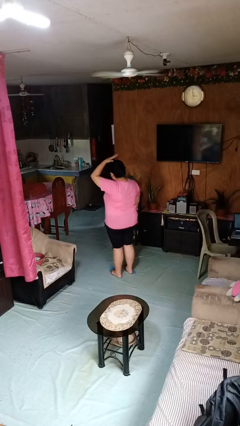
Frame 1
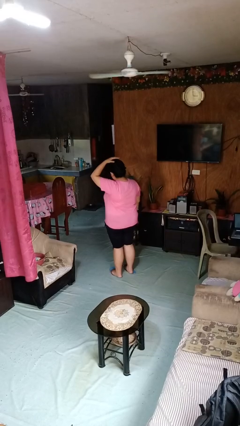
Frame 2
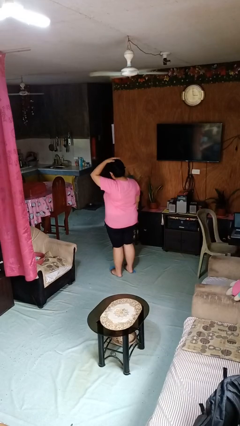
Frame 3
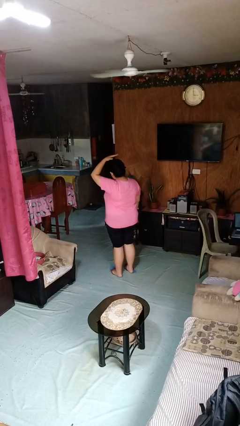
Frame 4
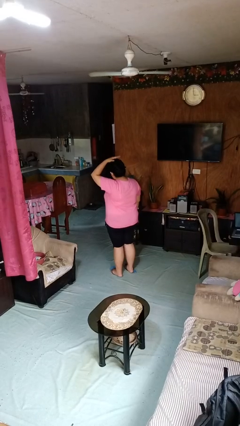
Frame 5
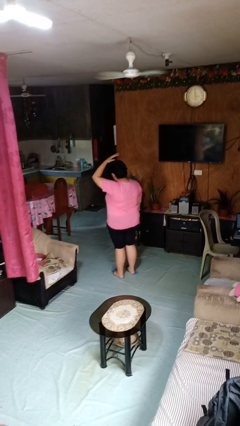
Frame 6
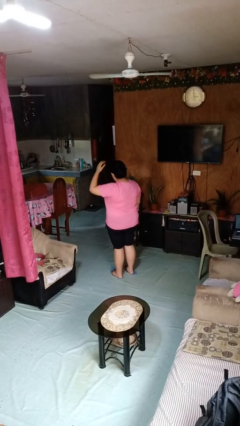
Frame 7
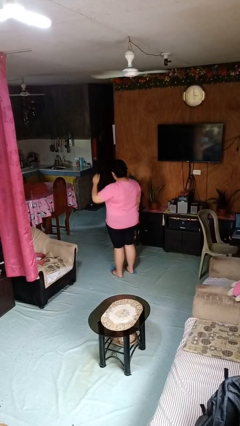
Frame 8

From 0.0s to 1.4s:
person pats head

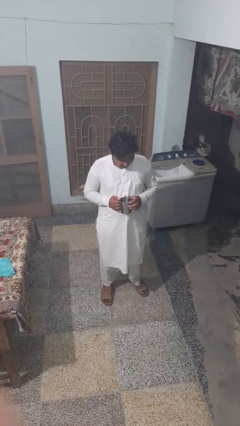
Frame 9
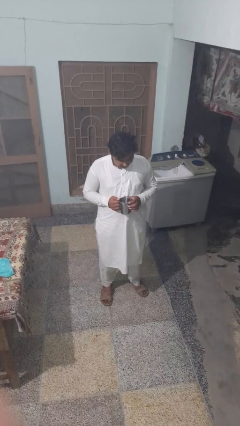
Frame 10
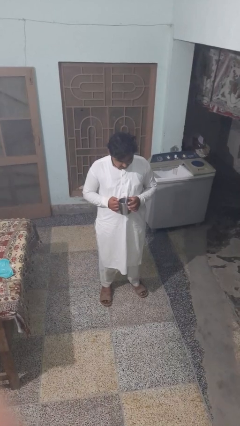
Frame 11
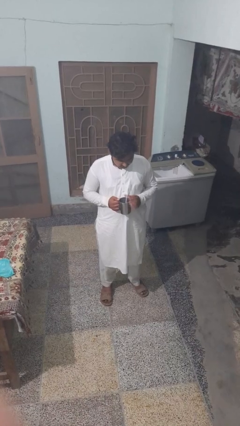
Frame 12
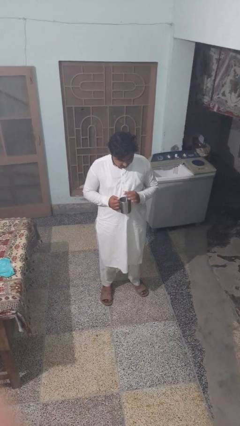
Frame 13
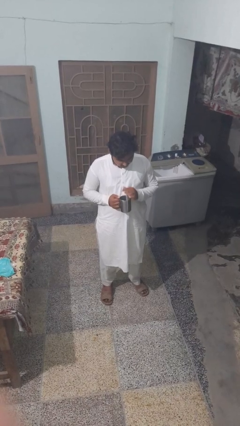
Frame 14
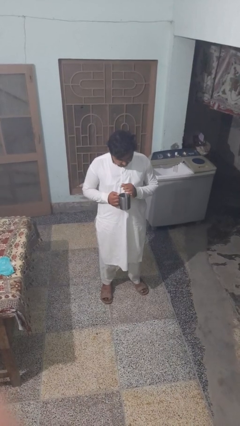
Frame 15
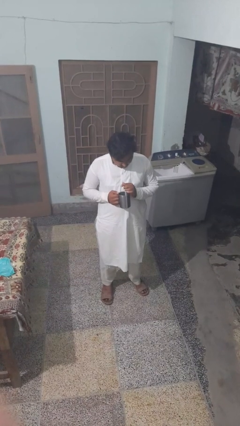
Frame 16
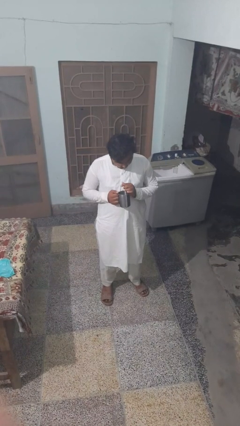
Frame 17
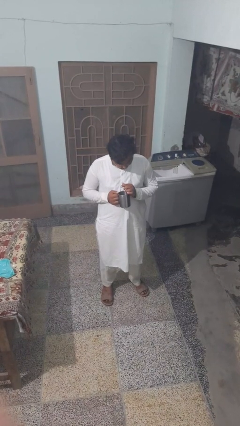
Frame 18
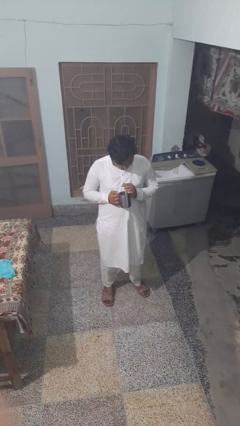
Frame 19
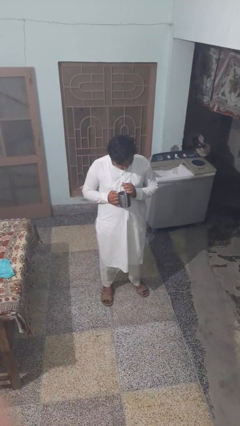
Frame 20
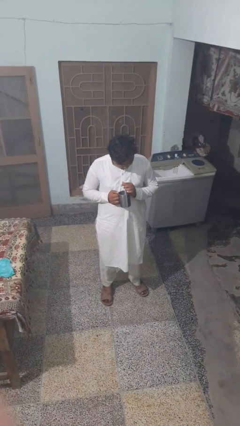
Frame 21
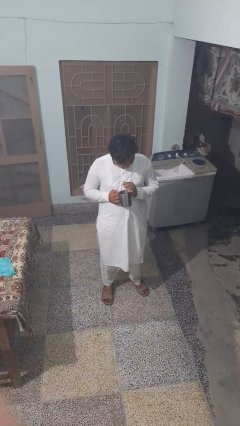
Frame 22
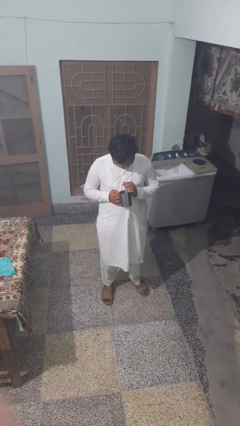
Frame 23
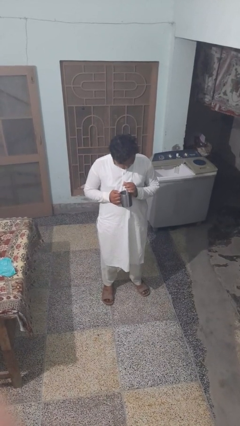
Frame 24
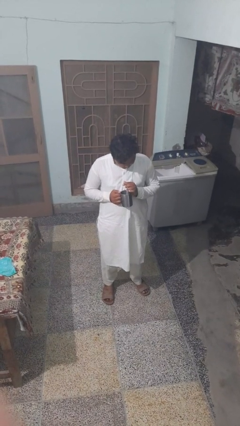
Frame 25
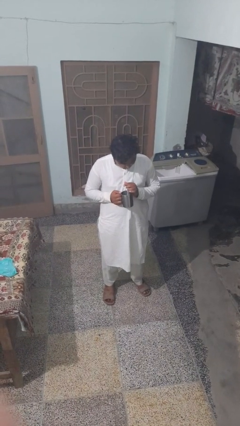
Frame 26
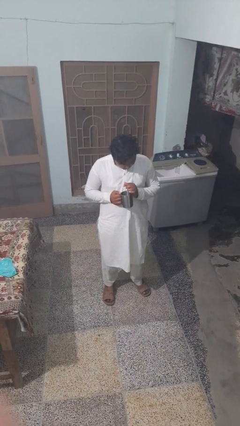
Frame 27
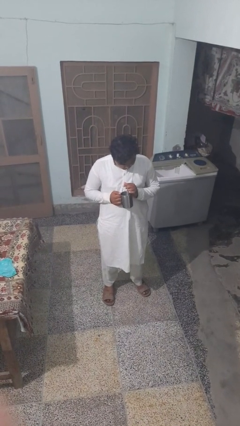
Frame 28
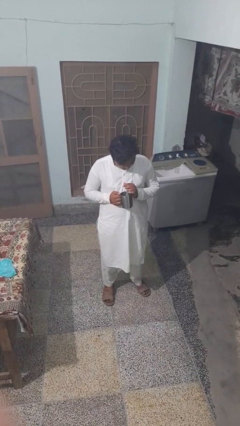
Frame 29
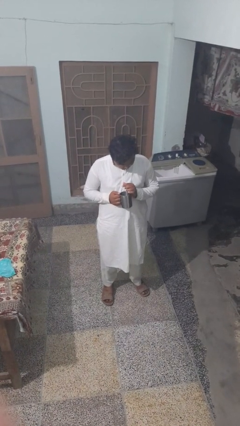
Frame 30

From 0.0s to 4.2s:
person drinks from straw

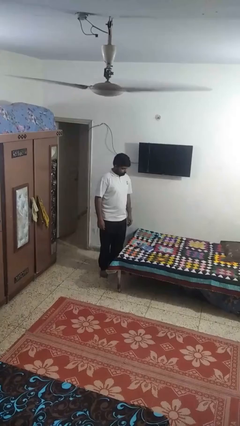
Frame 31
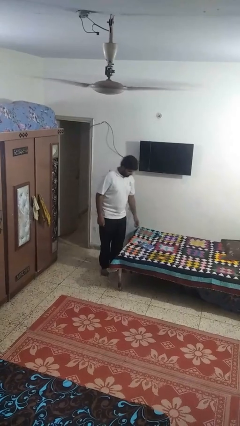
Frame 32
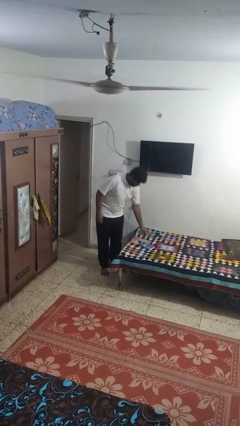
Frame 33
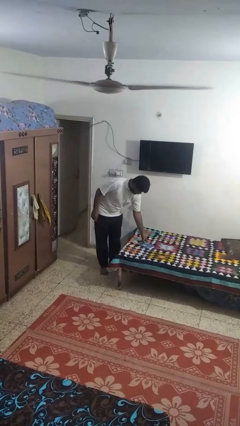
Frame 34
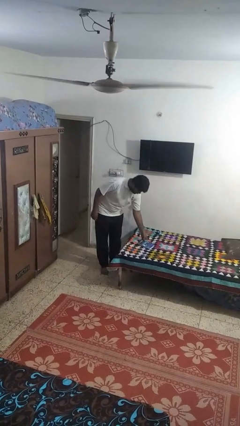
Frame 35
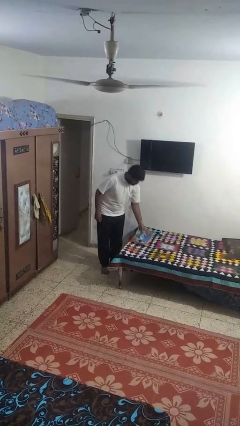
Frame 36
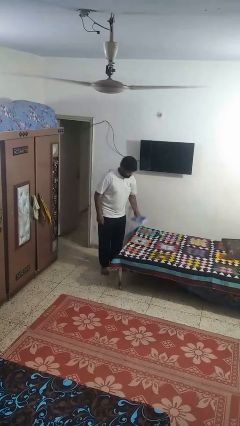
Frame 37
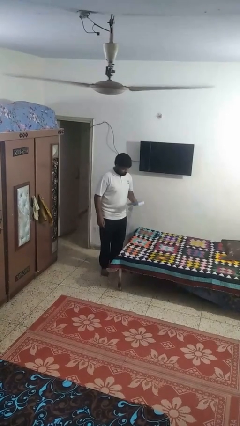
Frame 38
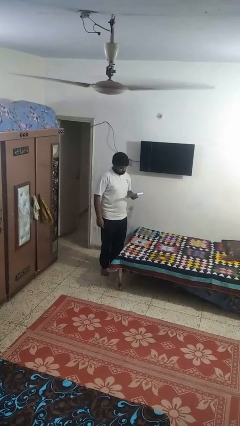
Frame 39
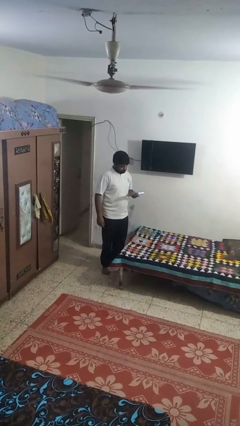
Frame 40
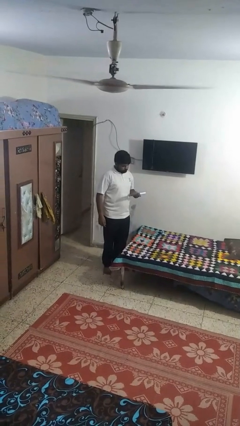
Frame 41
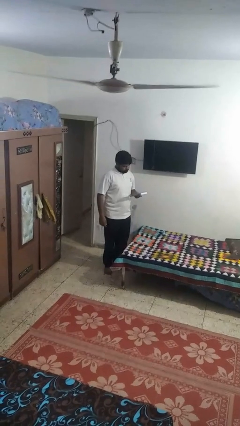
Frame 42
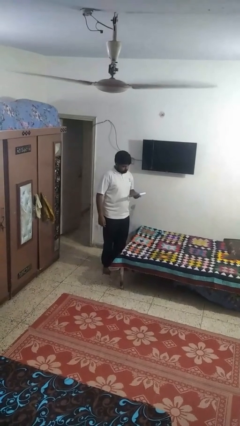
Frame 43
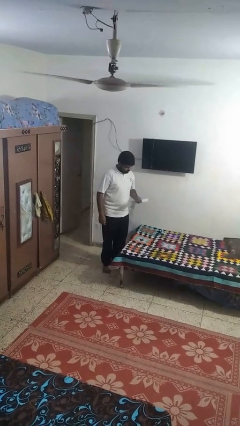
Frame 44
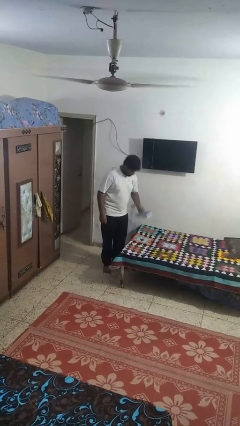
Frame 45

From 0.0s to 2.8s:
person picks up object from bed

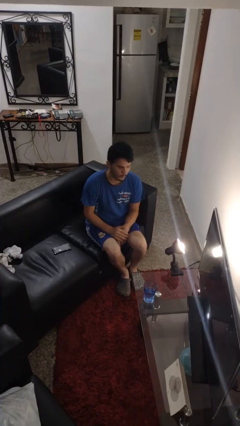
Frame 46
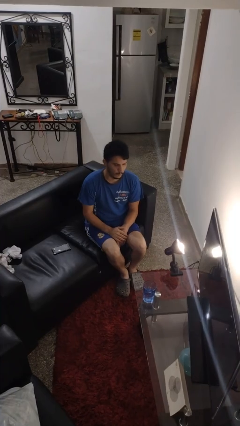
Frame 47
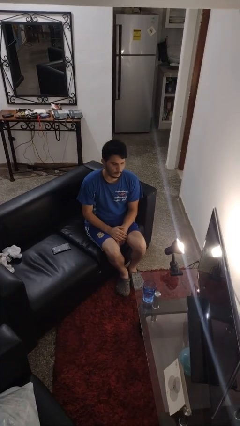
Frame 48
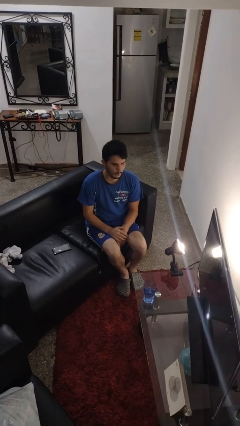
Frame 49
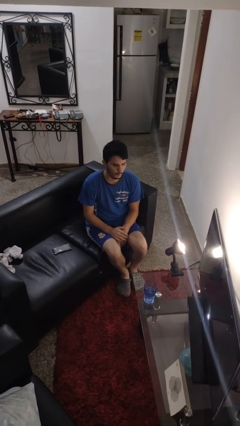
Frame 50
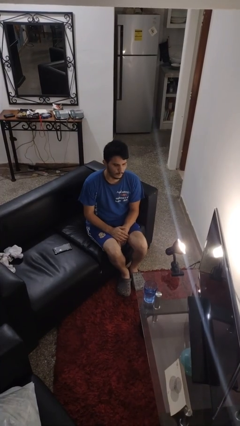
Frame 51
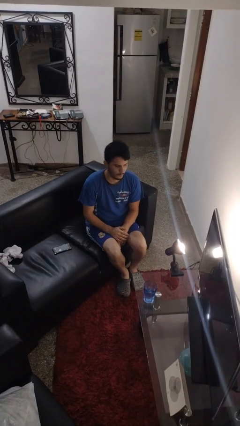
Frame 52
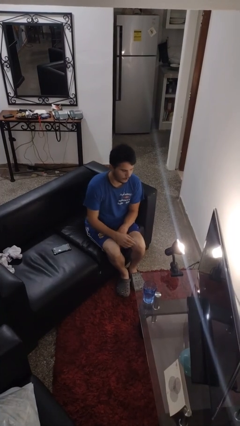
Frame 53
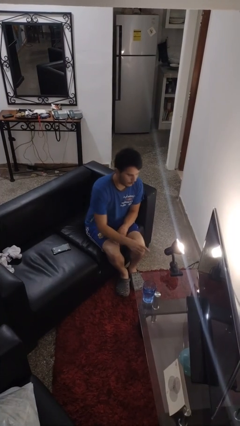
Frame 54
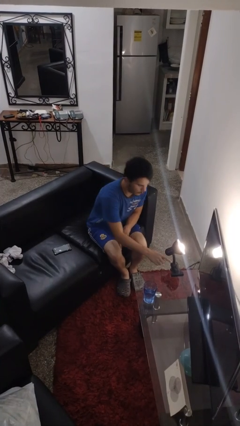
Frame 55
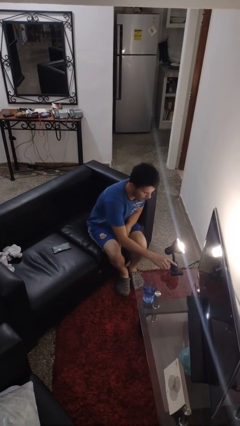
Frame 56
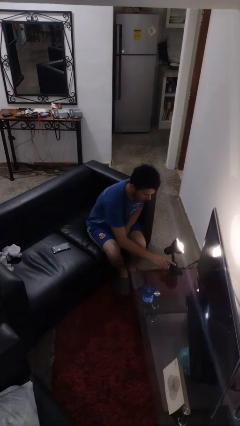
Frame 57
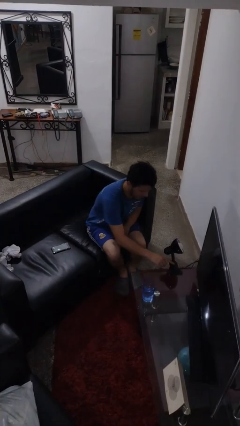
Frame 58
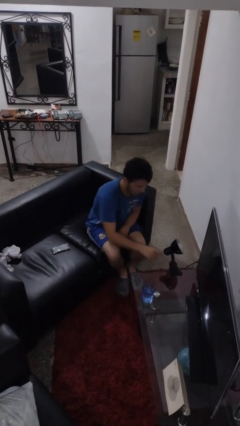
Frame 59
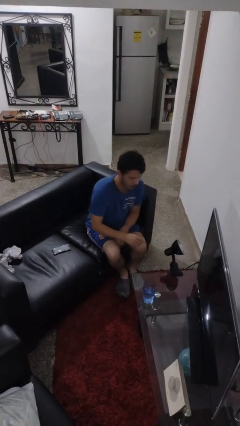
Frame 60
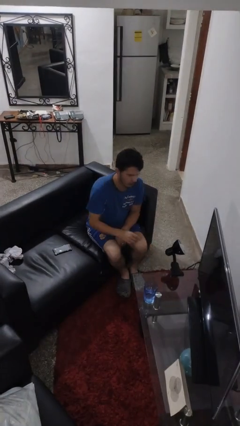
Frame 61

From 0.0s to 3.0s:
person turns off lamp

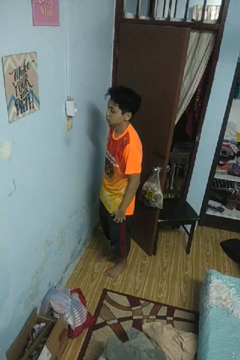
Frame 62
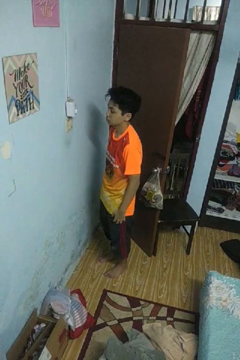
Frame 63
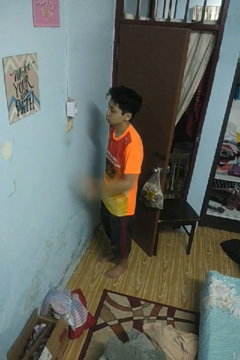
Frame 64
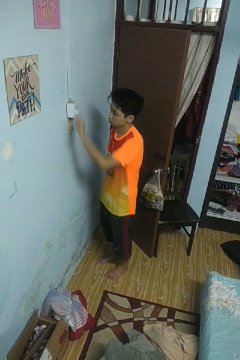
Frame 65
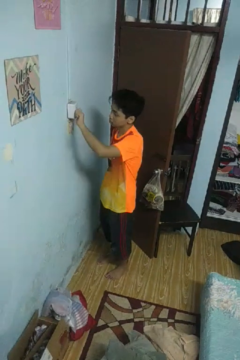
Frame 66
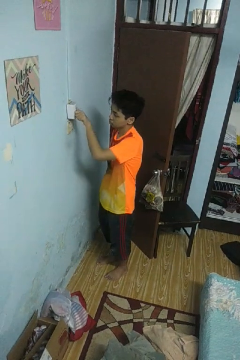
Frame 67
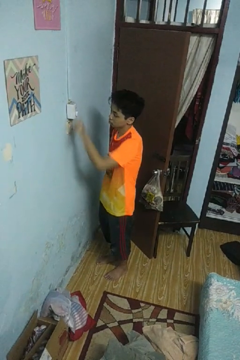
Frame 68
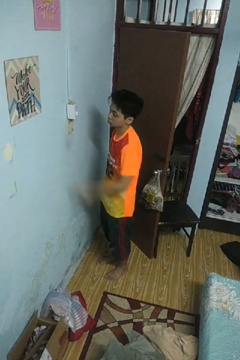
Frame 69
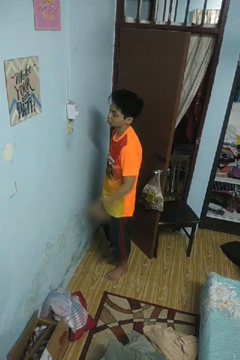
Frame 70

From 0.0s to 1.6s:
person adjusts thermostat

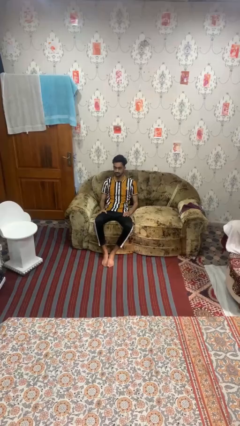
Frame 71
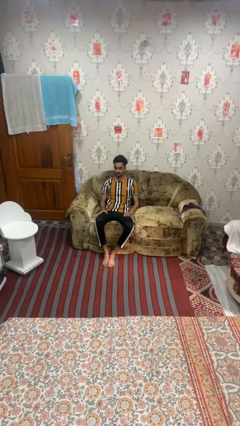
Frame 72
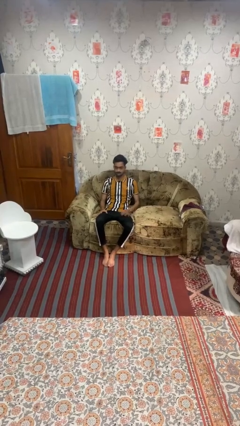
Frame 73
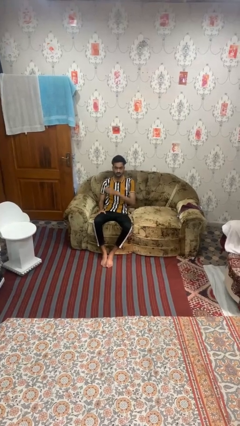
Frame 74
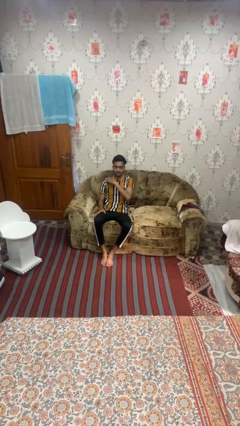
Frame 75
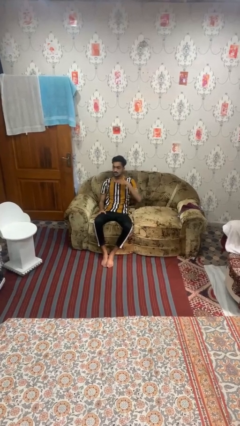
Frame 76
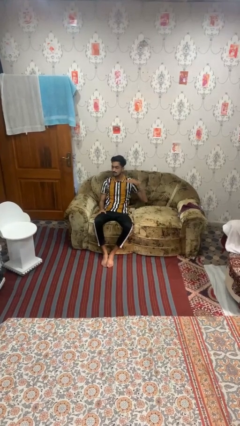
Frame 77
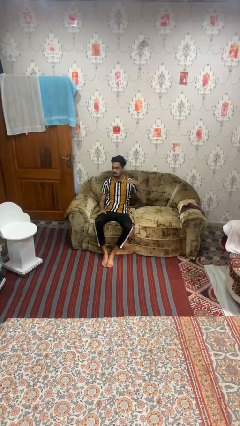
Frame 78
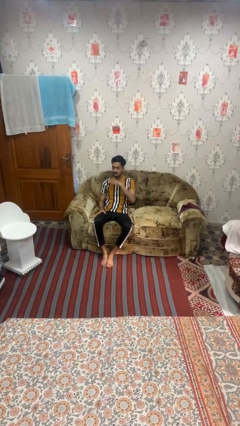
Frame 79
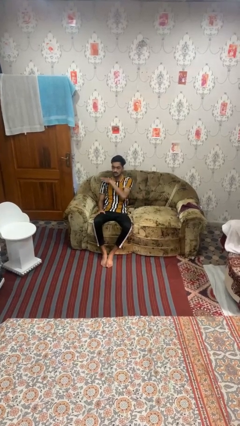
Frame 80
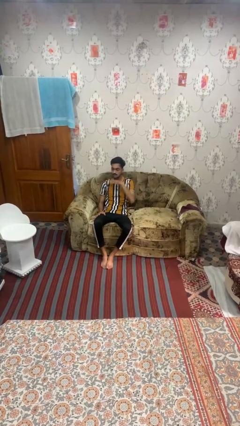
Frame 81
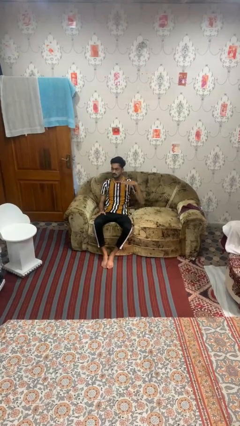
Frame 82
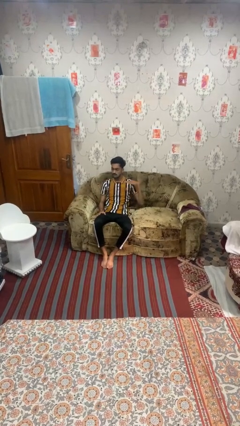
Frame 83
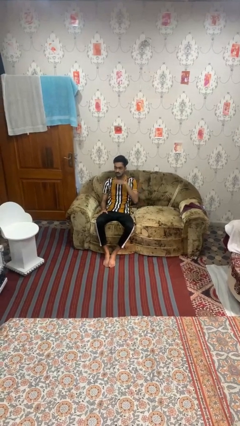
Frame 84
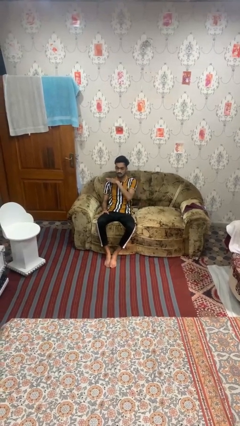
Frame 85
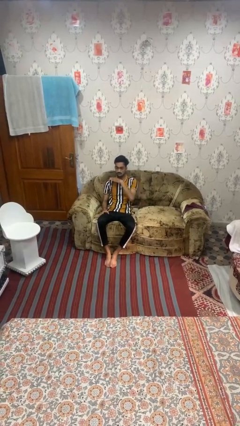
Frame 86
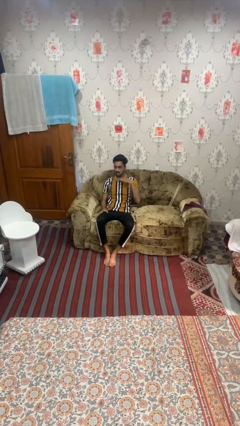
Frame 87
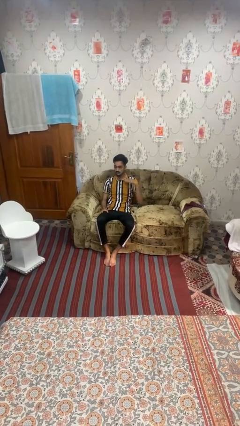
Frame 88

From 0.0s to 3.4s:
person gestures cut

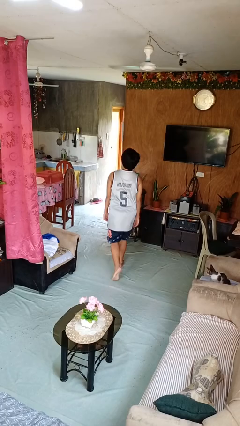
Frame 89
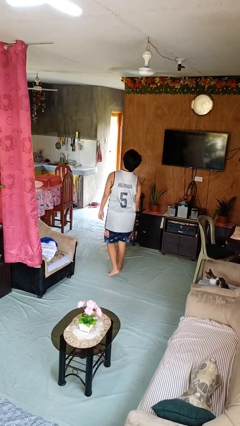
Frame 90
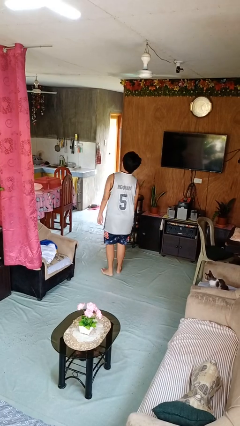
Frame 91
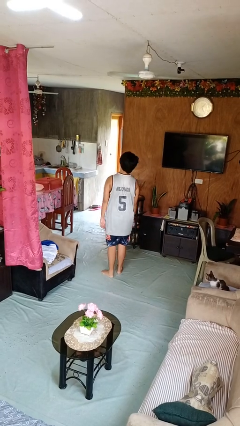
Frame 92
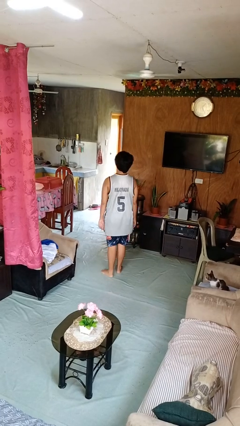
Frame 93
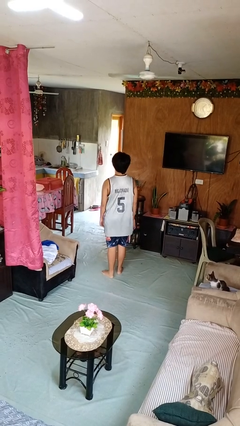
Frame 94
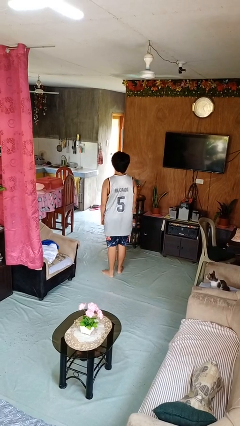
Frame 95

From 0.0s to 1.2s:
person stands up from floor
